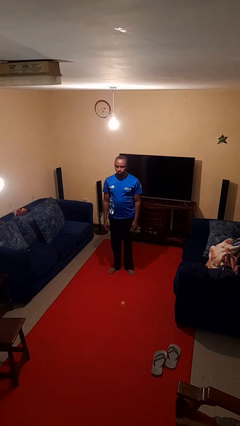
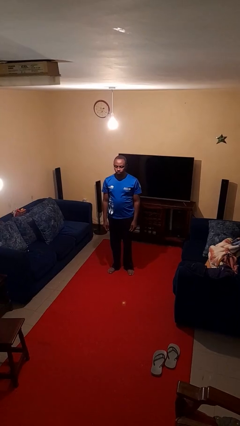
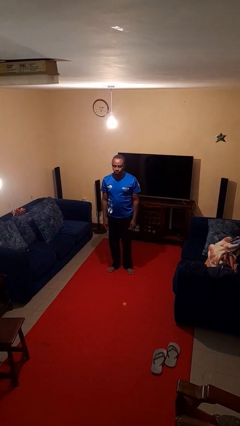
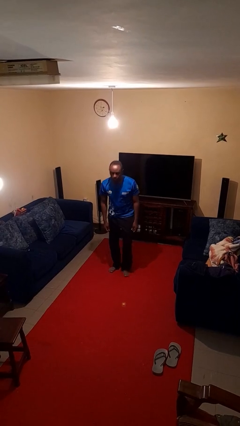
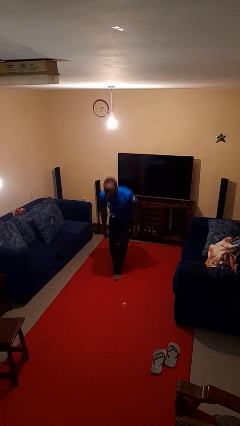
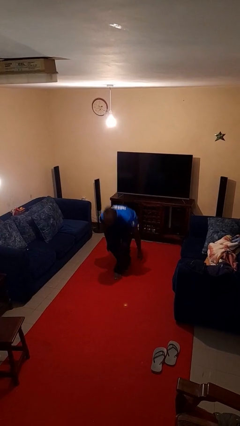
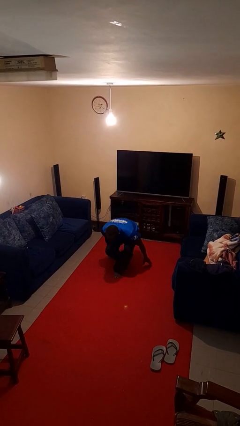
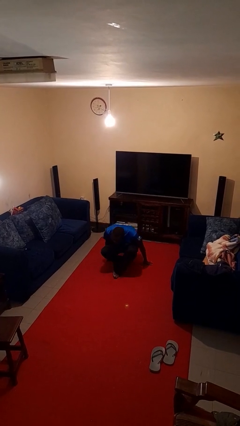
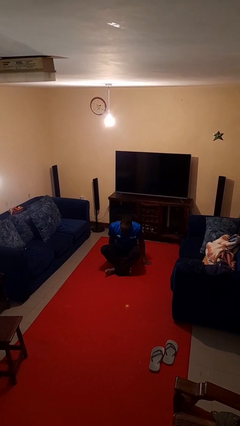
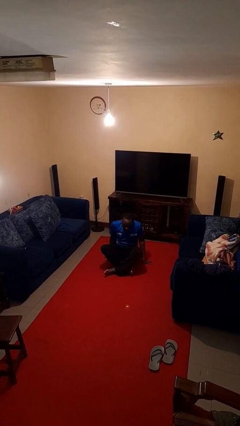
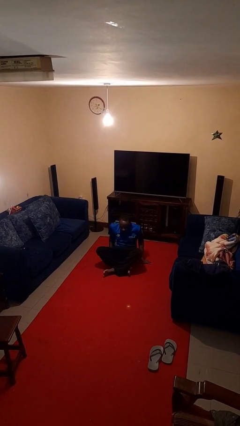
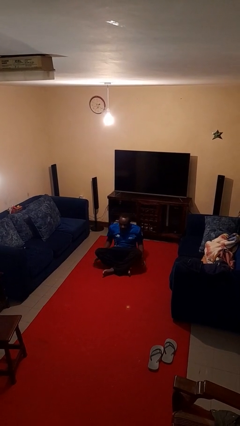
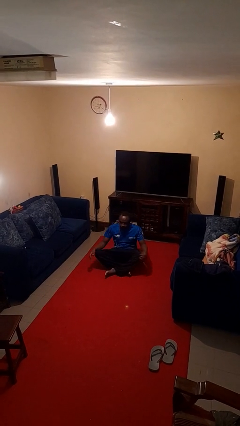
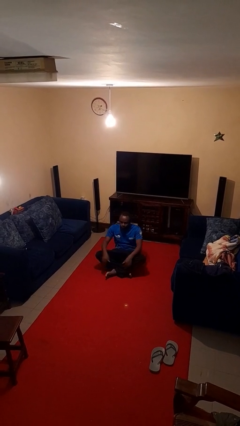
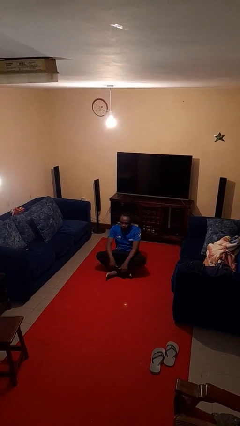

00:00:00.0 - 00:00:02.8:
person sits crisscross

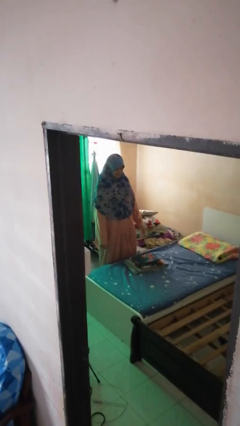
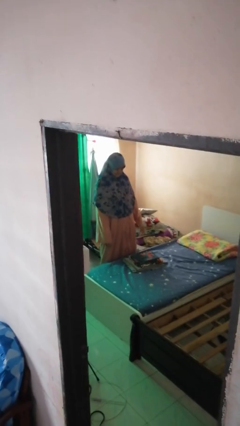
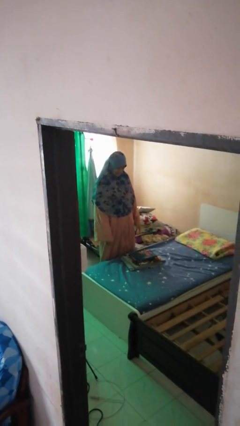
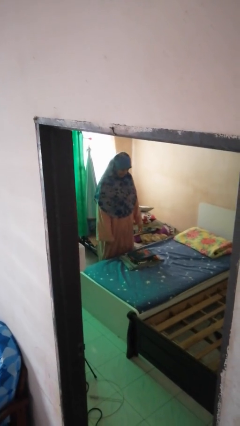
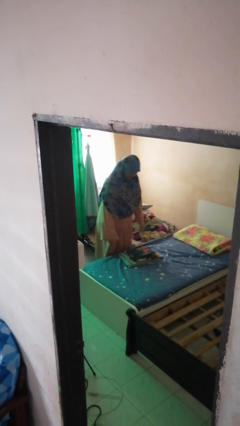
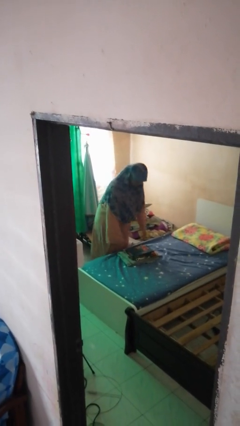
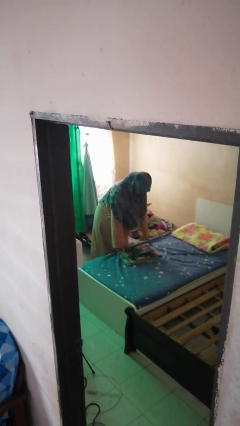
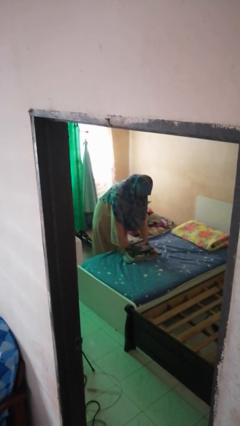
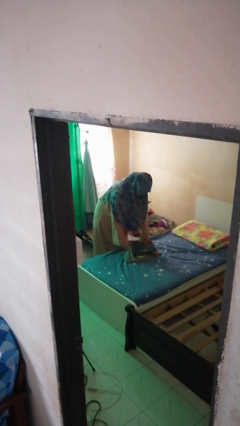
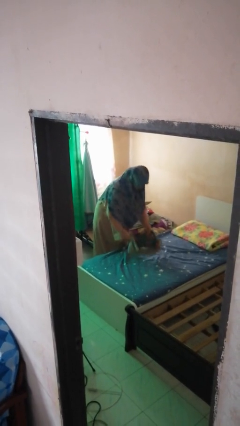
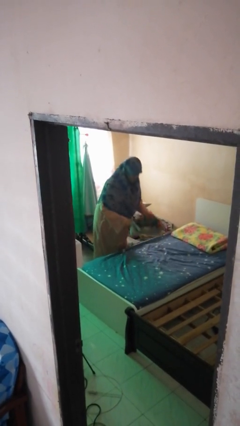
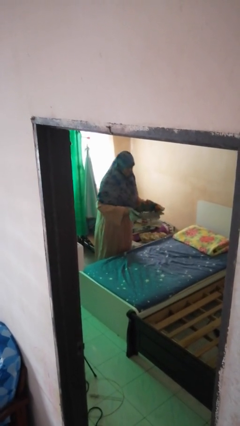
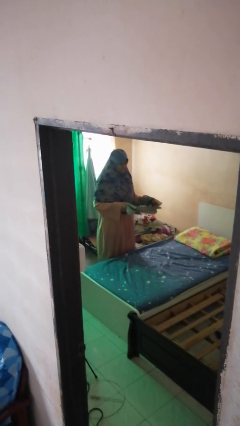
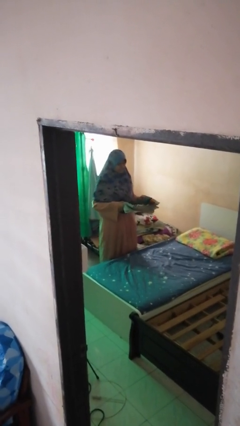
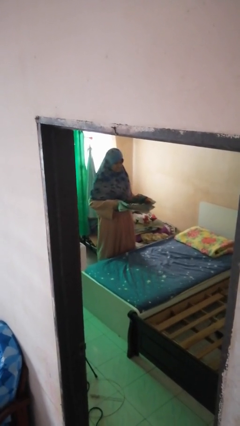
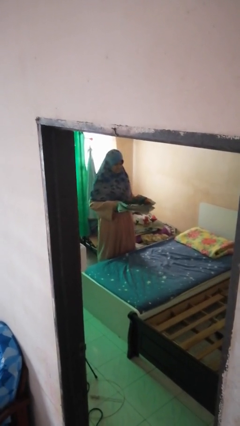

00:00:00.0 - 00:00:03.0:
person picks up object from bed

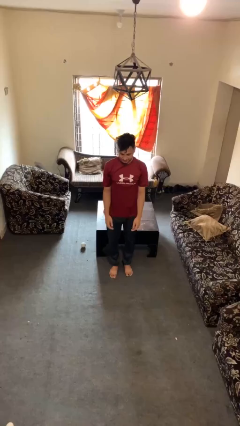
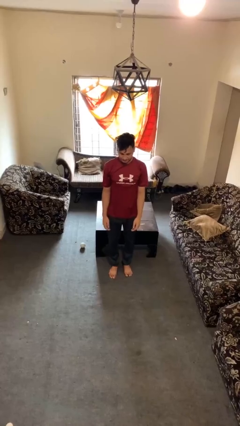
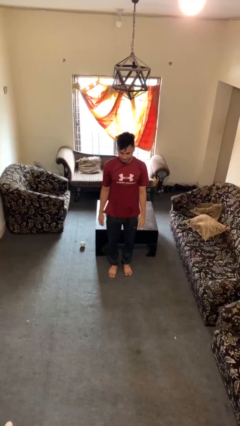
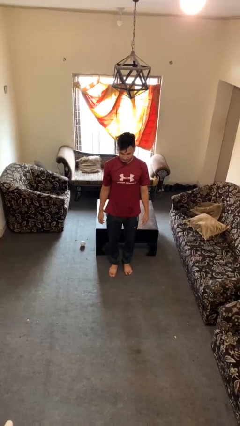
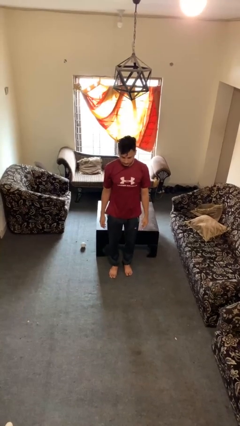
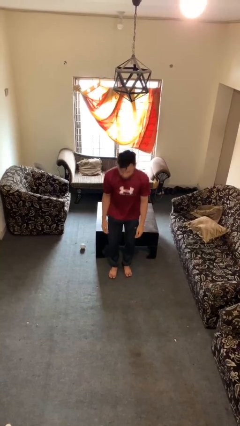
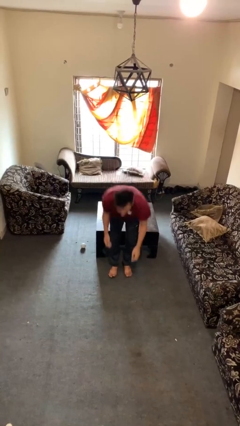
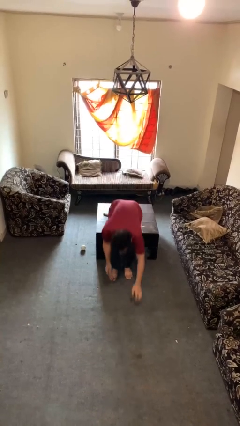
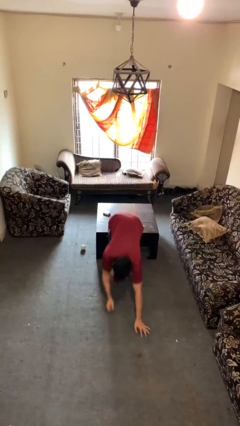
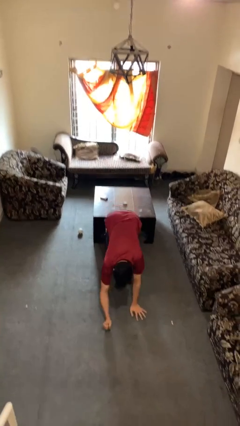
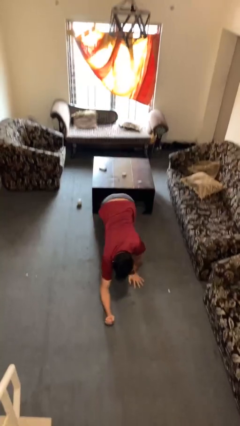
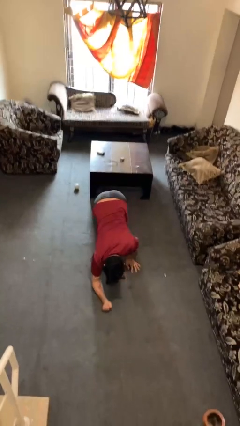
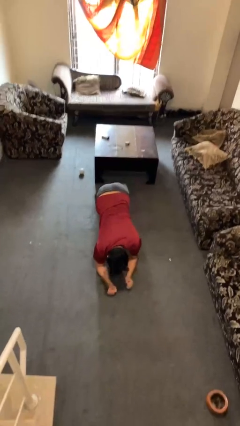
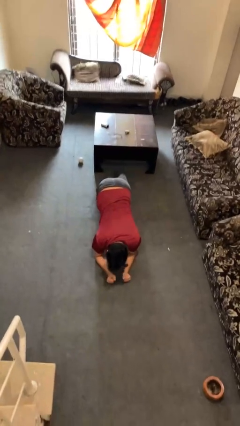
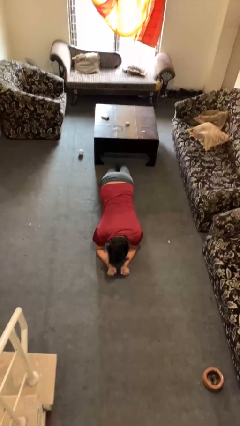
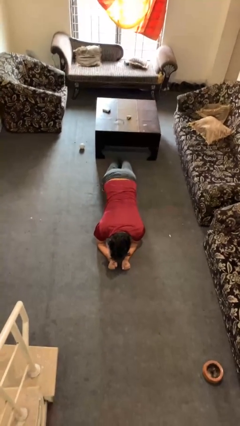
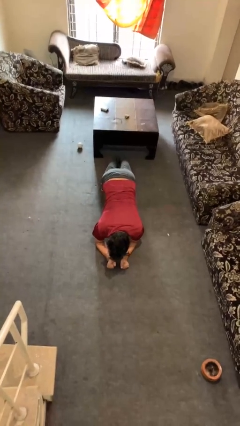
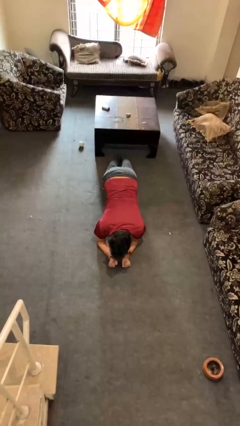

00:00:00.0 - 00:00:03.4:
person exercises with plank

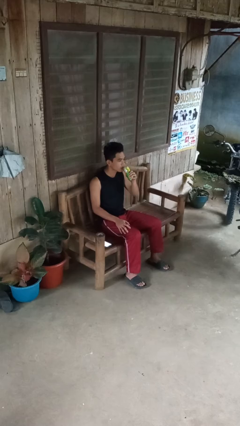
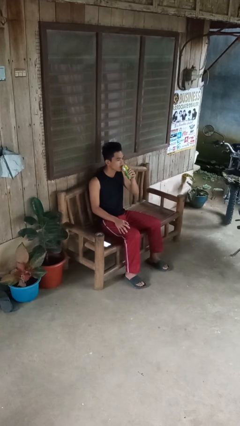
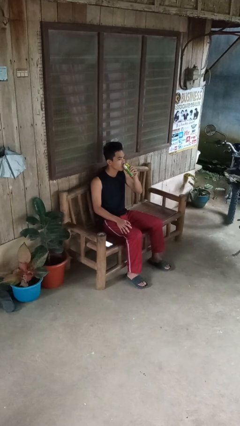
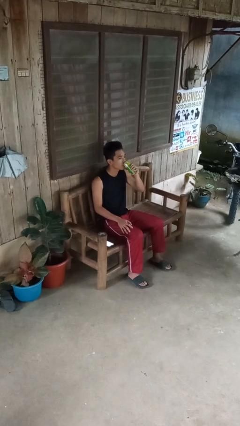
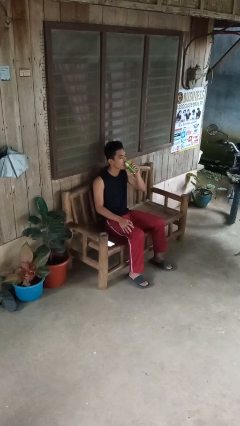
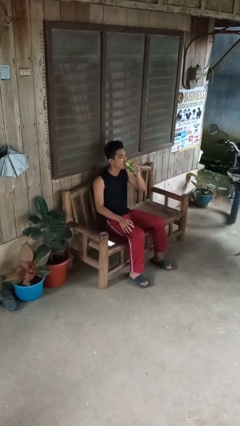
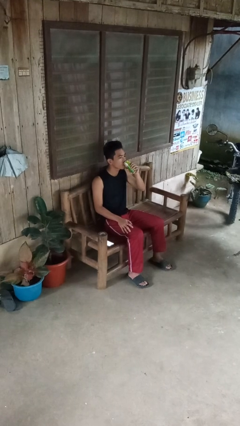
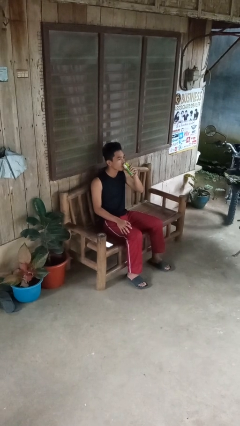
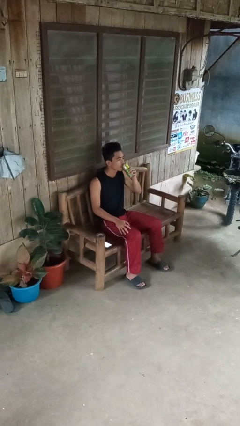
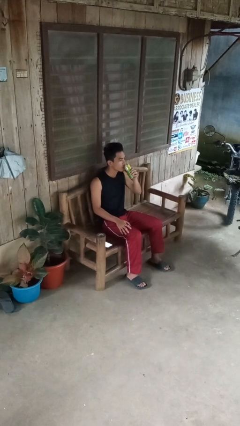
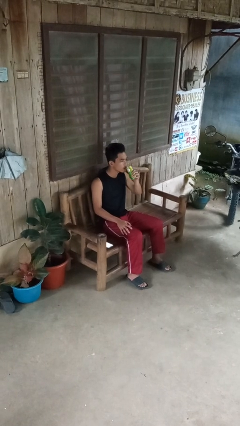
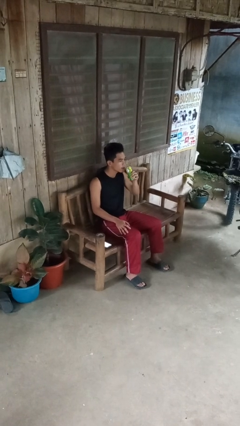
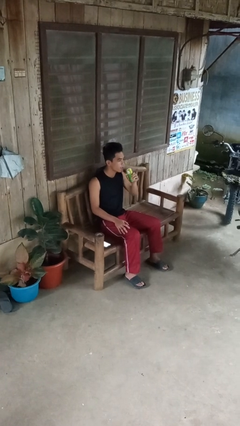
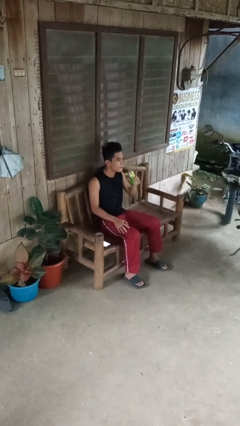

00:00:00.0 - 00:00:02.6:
person drinks from beverage can

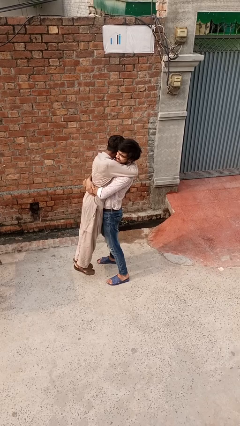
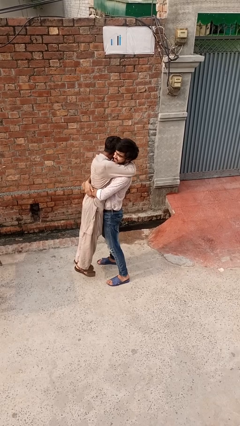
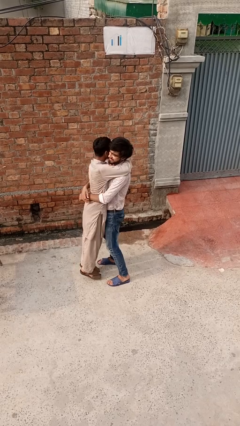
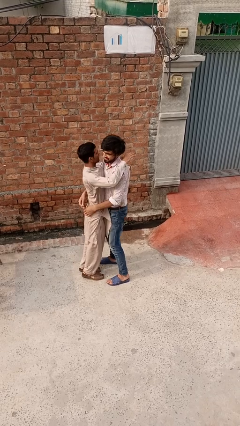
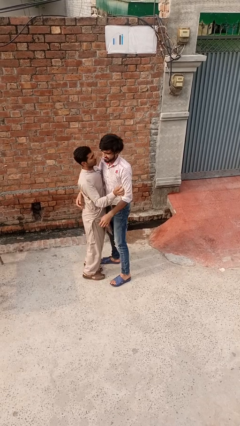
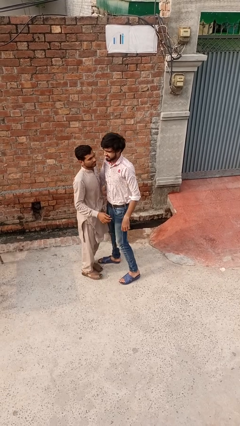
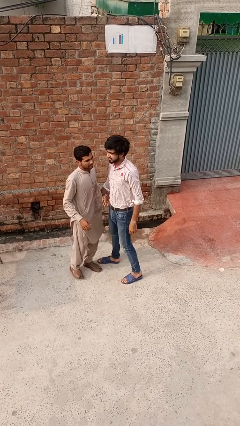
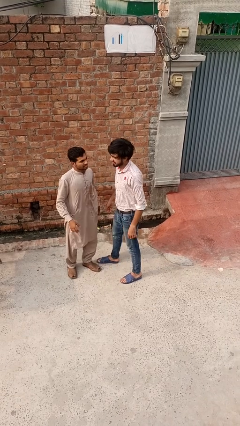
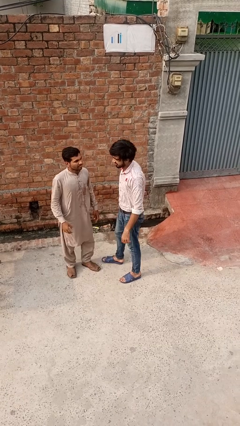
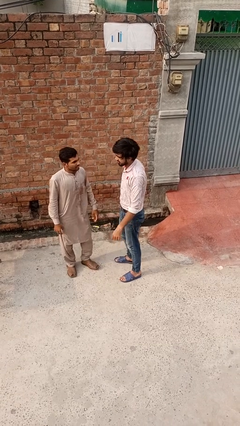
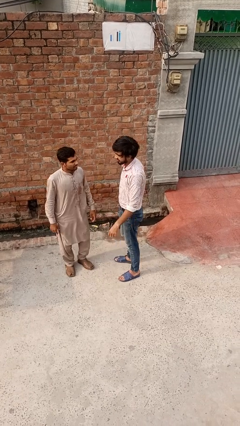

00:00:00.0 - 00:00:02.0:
person puts down person

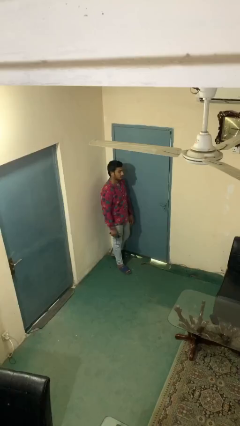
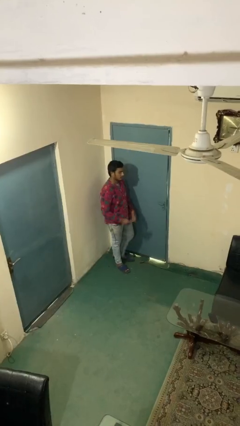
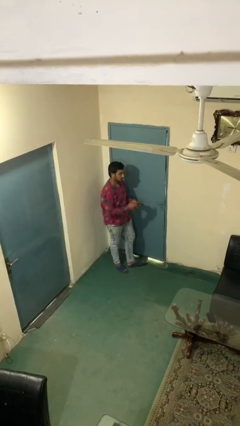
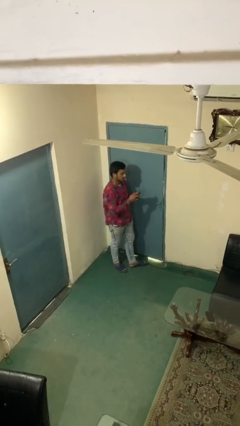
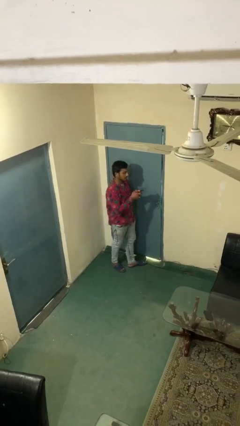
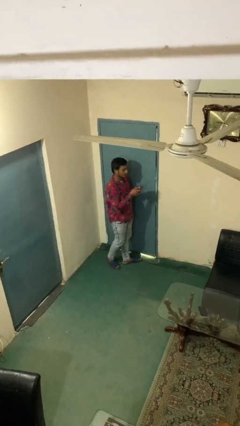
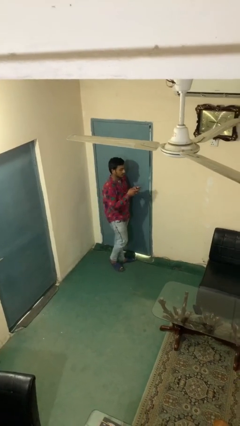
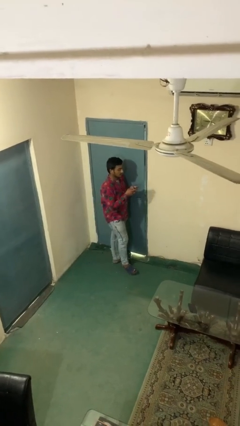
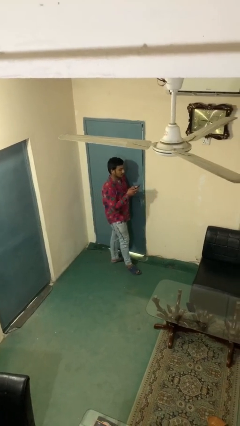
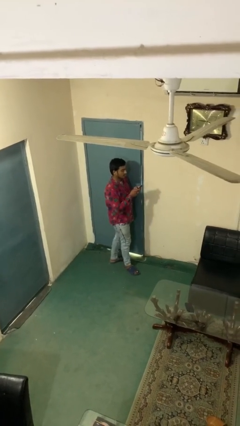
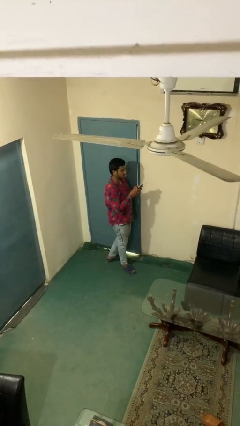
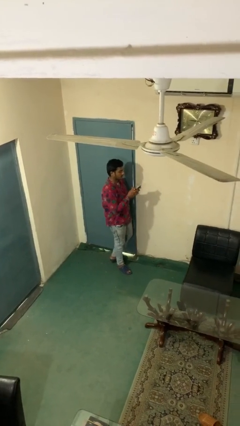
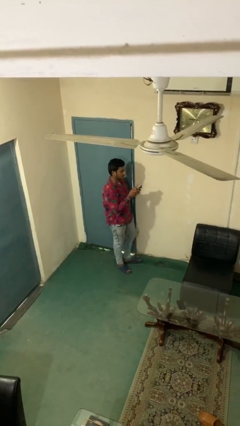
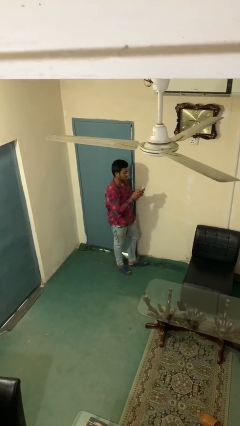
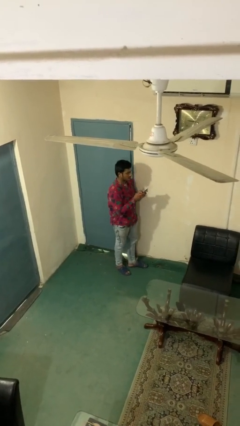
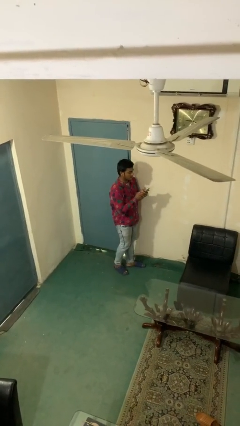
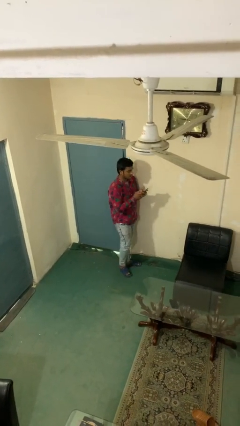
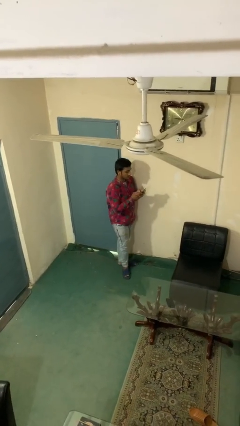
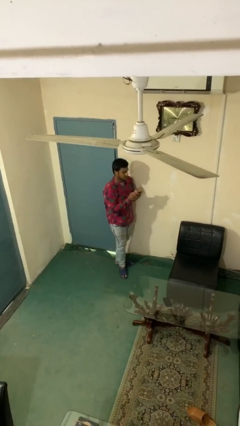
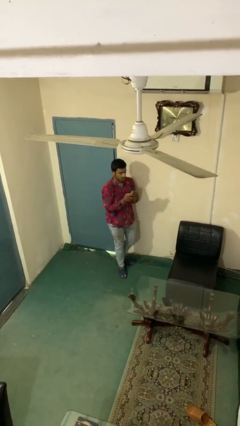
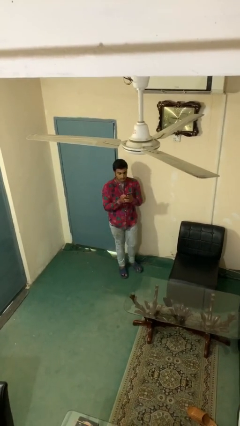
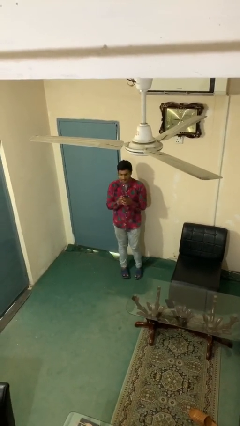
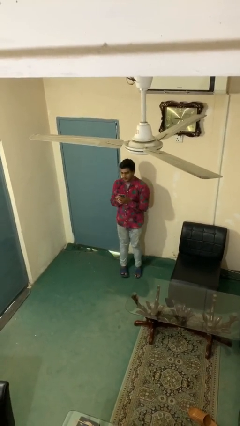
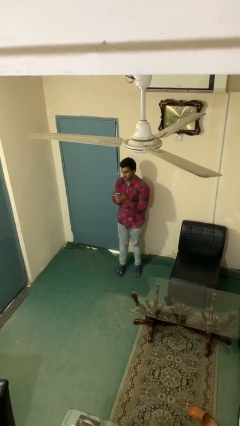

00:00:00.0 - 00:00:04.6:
person texts on phone
